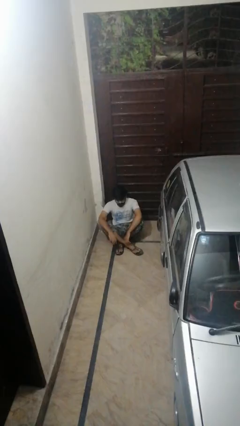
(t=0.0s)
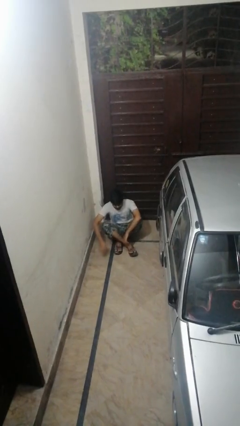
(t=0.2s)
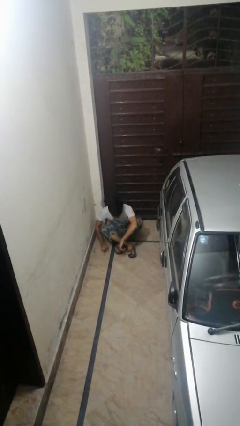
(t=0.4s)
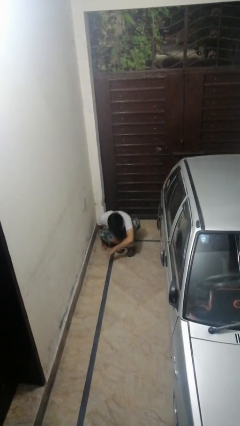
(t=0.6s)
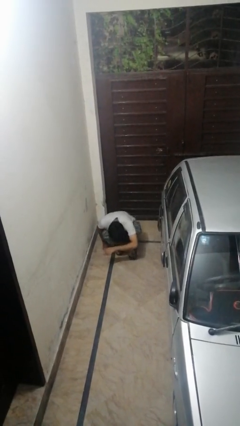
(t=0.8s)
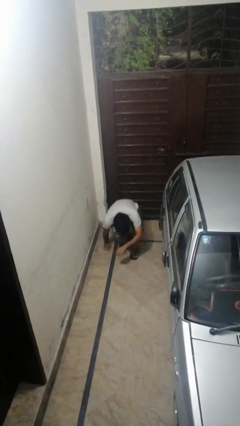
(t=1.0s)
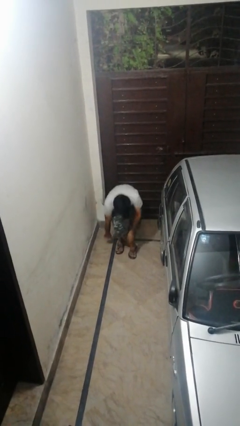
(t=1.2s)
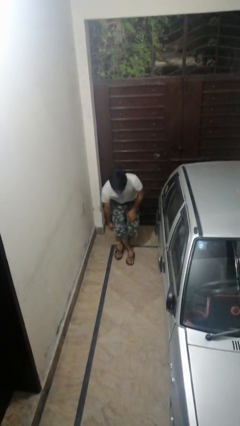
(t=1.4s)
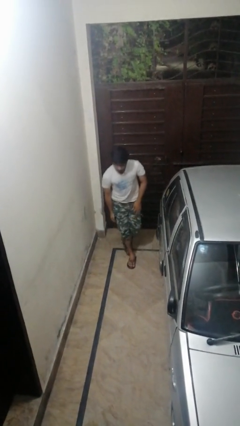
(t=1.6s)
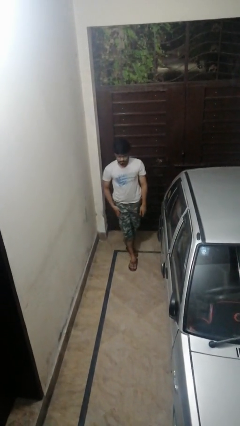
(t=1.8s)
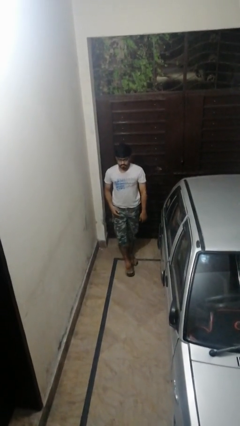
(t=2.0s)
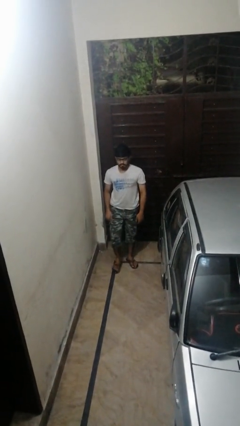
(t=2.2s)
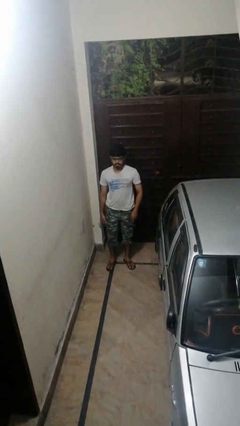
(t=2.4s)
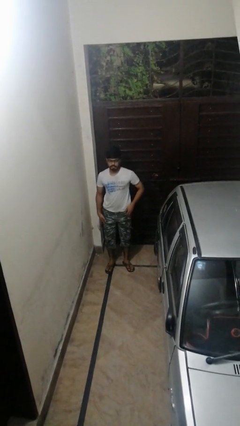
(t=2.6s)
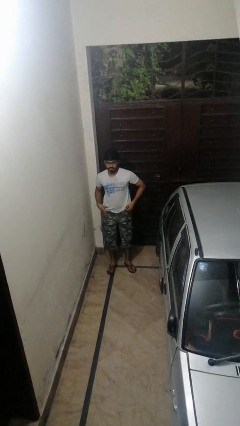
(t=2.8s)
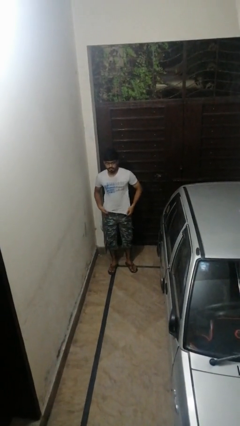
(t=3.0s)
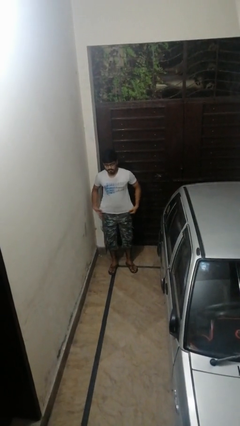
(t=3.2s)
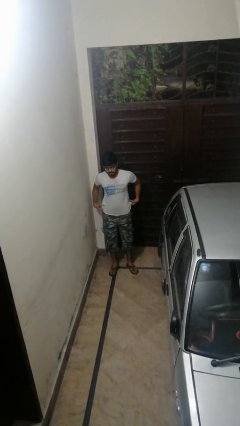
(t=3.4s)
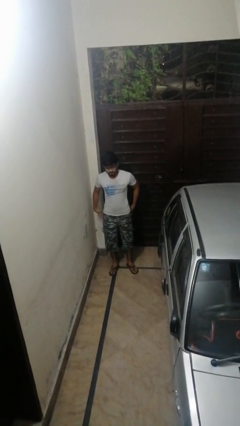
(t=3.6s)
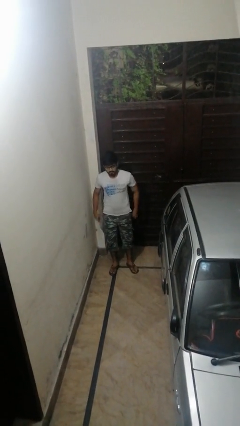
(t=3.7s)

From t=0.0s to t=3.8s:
person stands up from floor

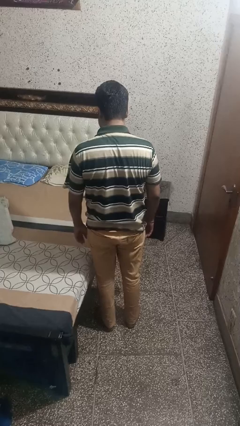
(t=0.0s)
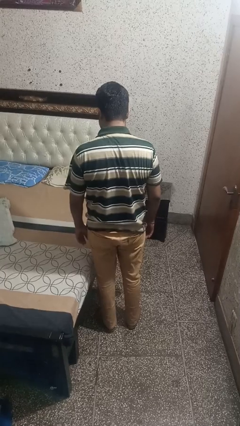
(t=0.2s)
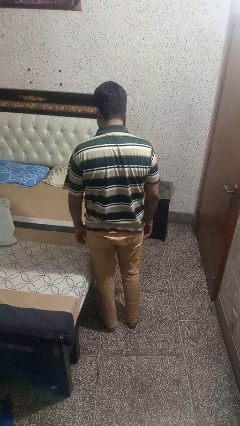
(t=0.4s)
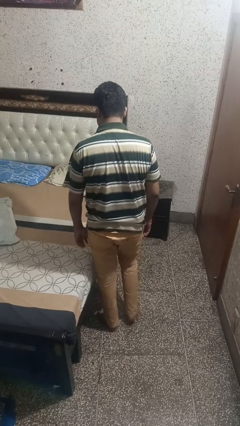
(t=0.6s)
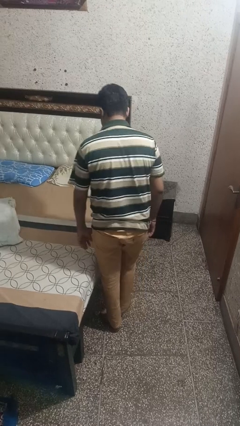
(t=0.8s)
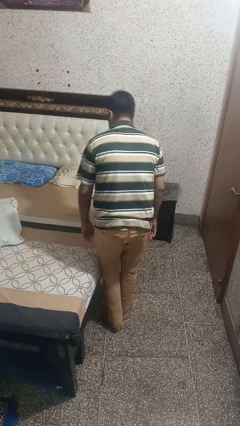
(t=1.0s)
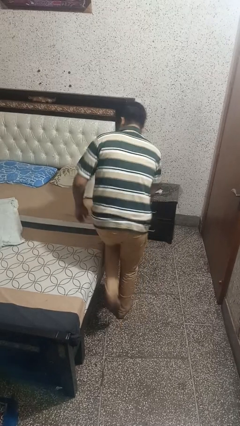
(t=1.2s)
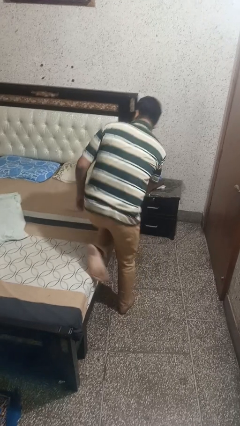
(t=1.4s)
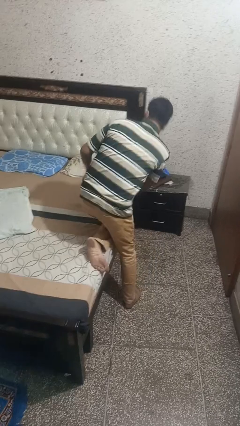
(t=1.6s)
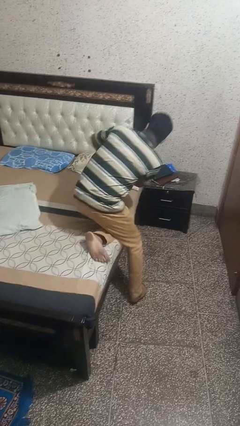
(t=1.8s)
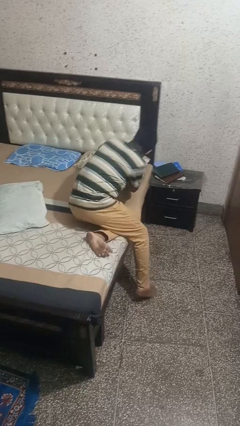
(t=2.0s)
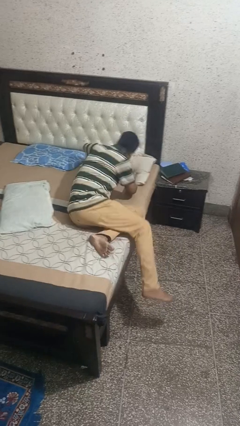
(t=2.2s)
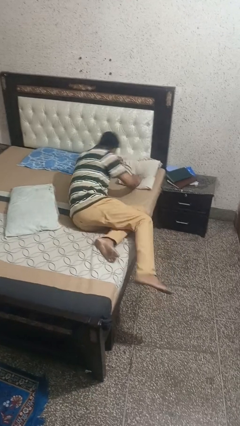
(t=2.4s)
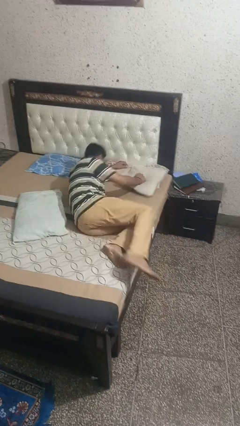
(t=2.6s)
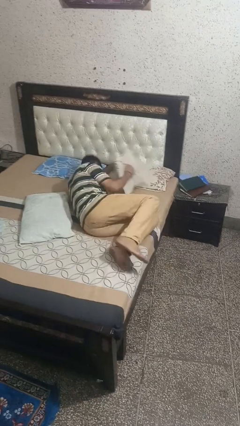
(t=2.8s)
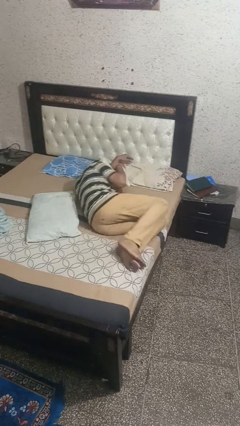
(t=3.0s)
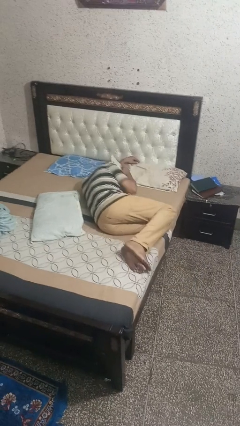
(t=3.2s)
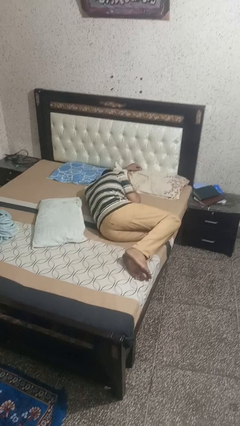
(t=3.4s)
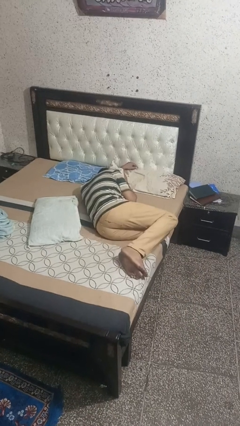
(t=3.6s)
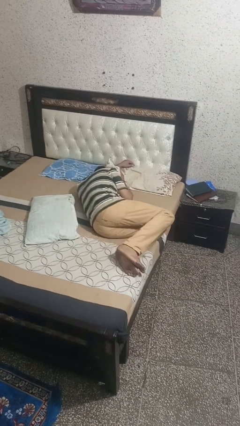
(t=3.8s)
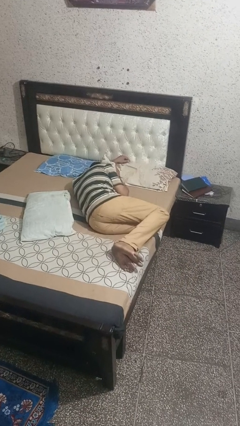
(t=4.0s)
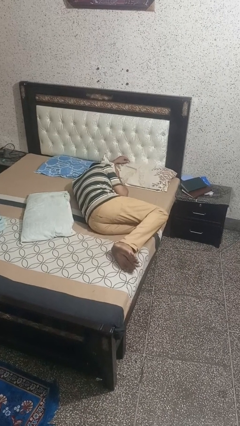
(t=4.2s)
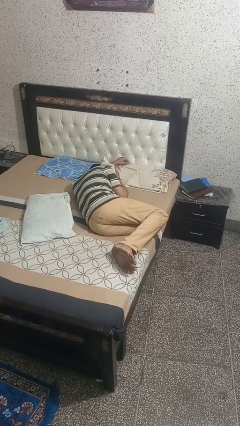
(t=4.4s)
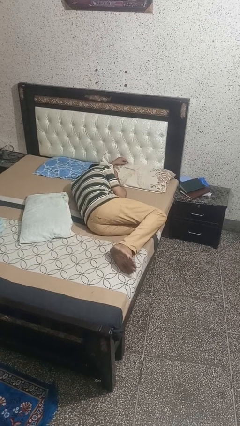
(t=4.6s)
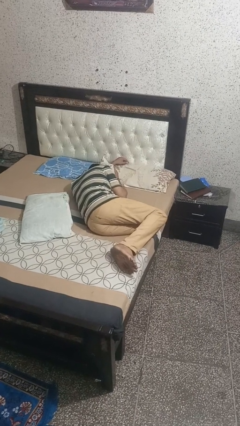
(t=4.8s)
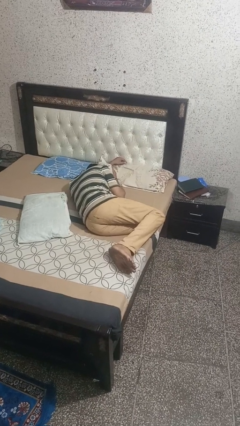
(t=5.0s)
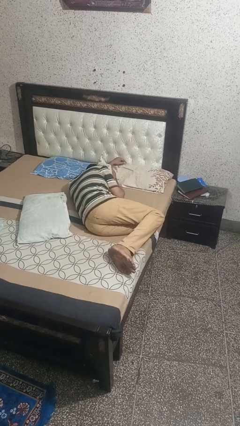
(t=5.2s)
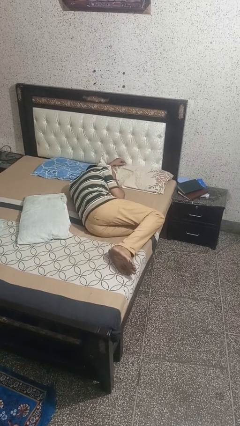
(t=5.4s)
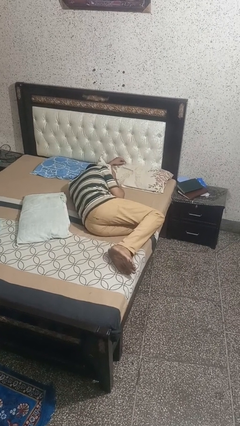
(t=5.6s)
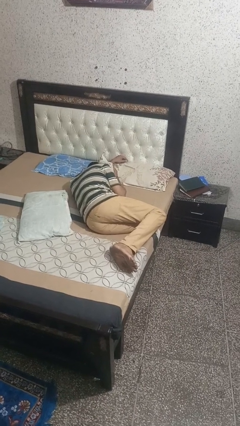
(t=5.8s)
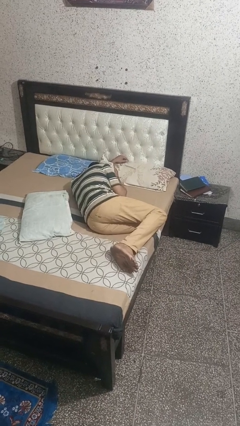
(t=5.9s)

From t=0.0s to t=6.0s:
person lies down on bed

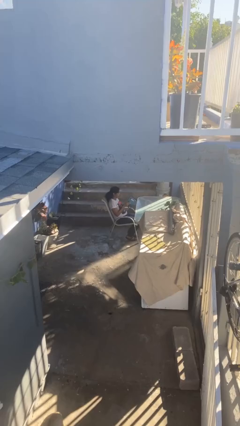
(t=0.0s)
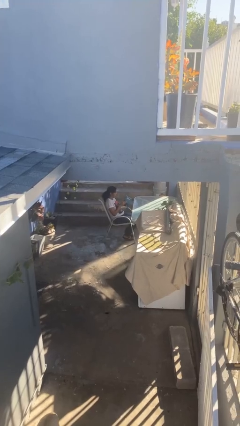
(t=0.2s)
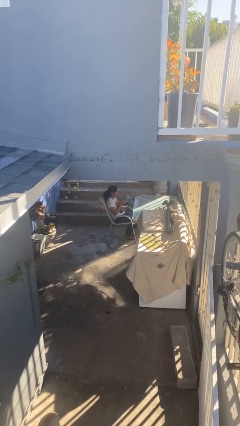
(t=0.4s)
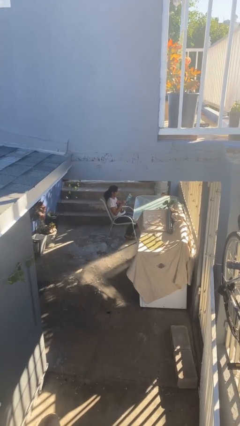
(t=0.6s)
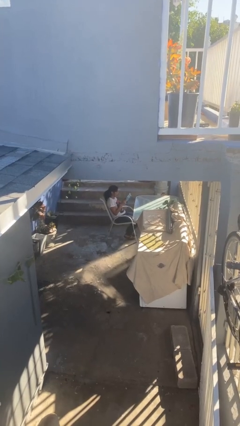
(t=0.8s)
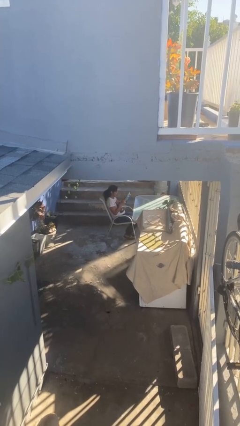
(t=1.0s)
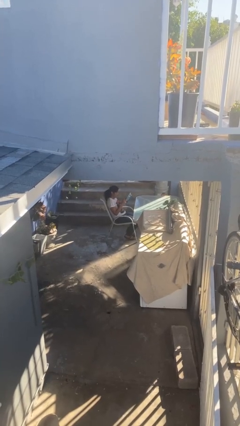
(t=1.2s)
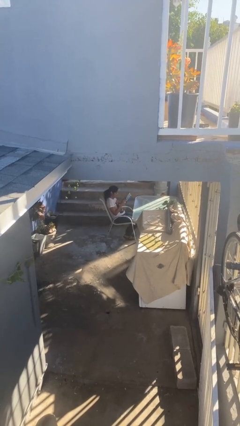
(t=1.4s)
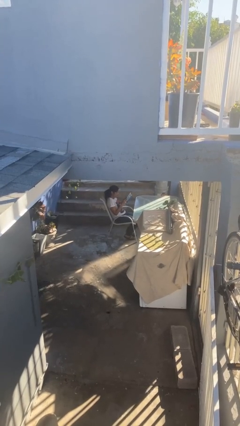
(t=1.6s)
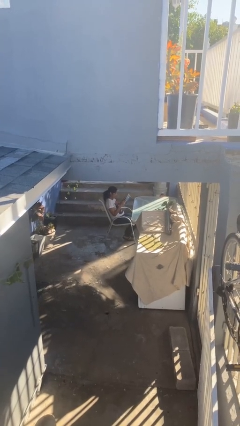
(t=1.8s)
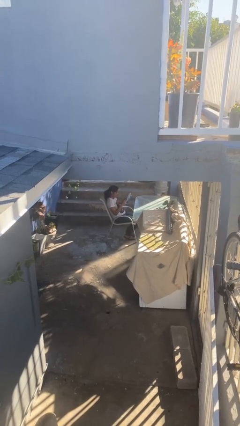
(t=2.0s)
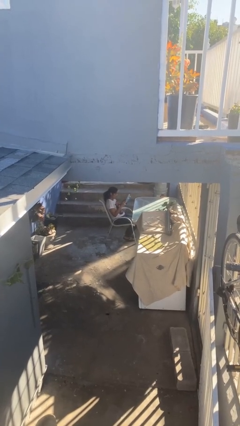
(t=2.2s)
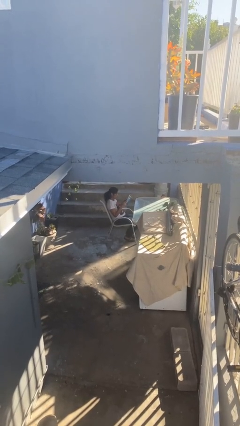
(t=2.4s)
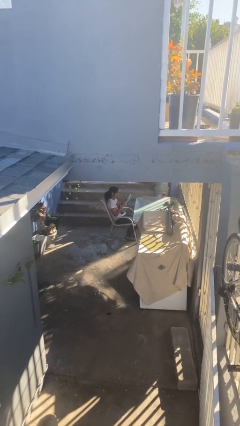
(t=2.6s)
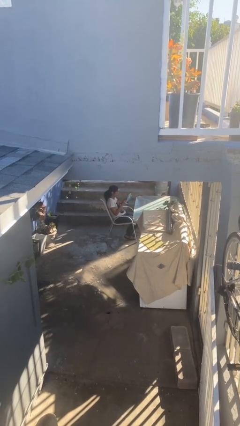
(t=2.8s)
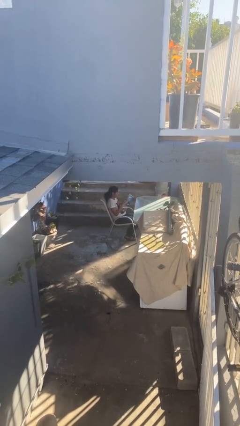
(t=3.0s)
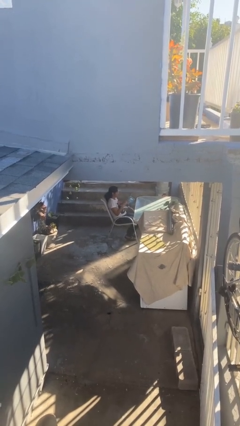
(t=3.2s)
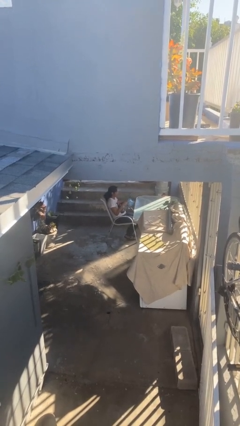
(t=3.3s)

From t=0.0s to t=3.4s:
person reads document

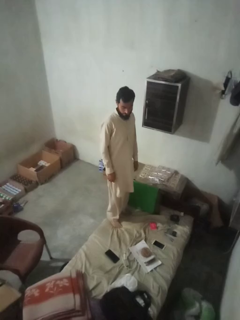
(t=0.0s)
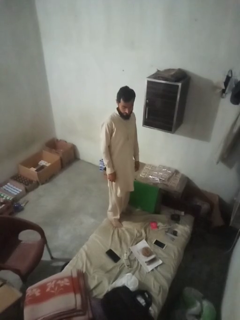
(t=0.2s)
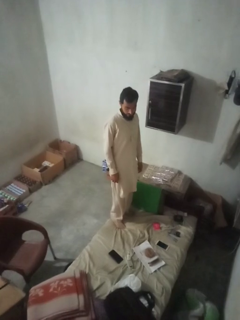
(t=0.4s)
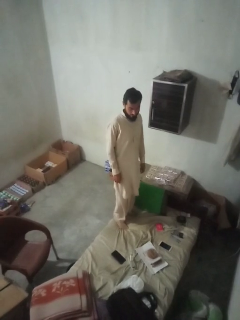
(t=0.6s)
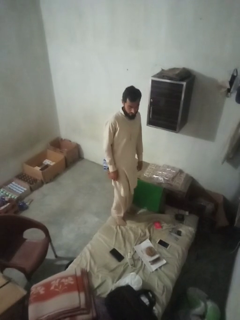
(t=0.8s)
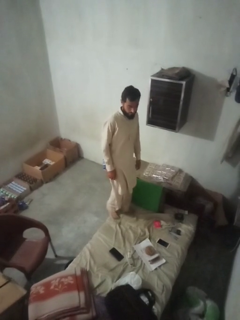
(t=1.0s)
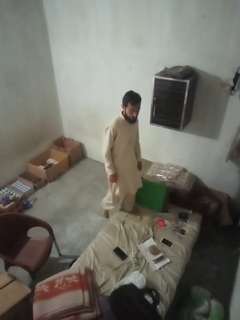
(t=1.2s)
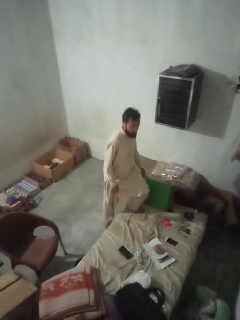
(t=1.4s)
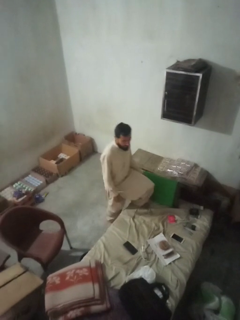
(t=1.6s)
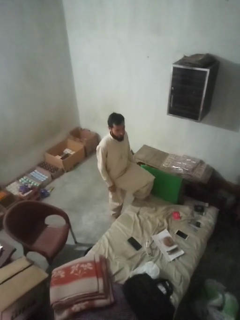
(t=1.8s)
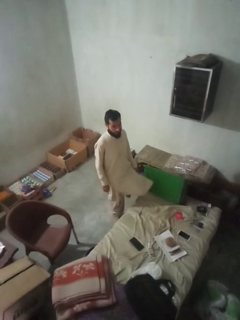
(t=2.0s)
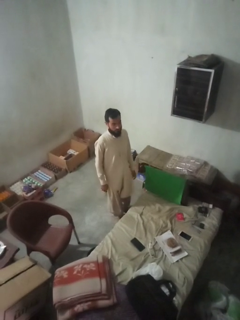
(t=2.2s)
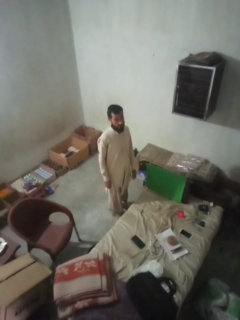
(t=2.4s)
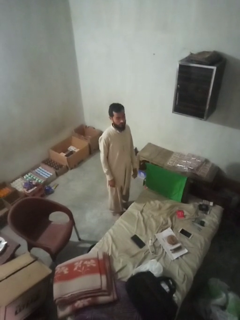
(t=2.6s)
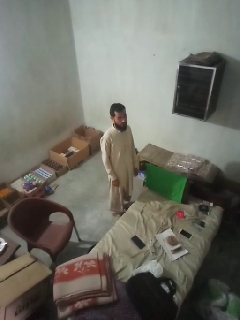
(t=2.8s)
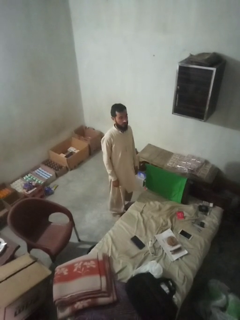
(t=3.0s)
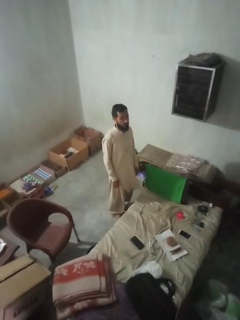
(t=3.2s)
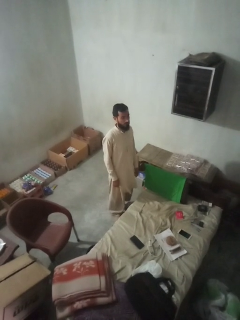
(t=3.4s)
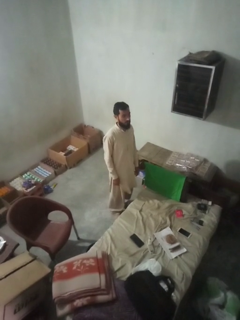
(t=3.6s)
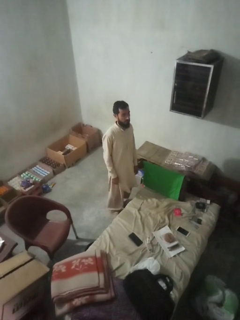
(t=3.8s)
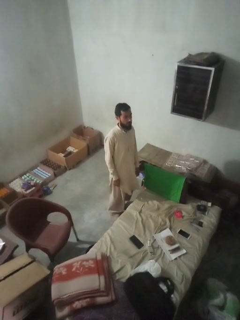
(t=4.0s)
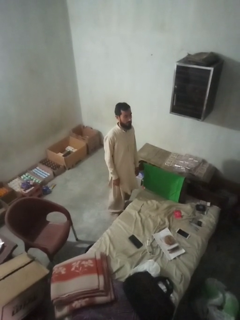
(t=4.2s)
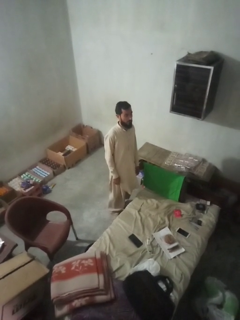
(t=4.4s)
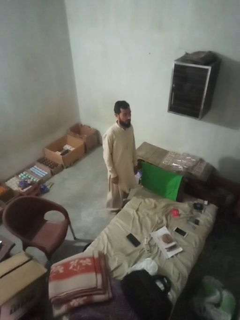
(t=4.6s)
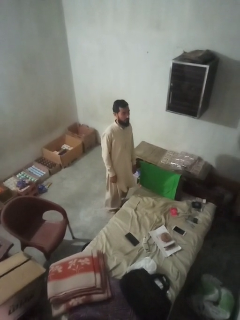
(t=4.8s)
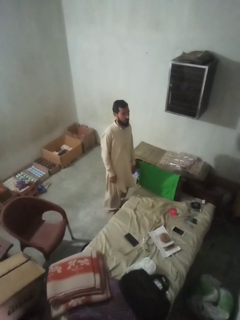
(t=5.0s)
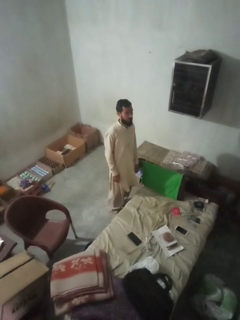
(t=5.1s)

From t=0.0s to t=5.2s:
person climbs off couch

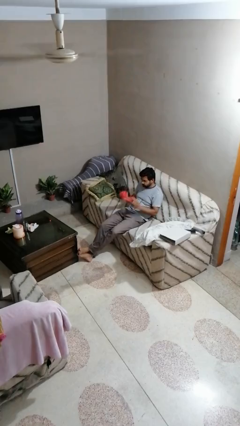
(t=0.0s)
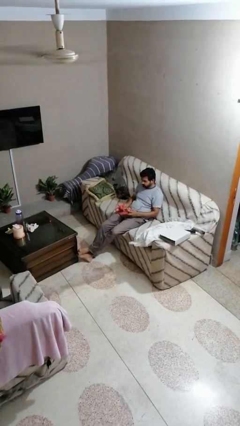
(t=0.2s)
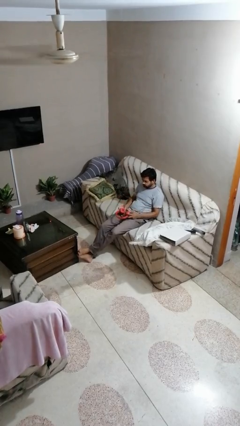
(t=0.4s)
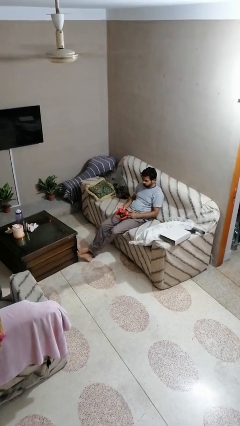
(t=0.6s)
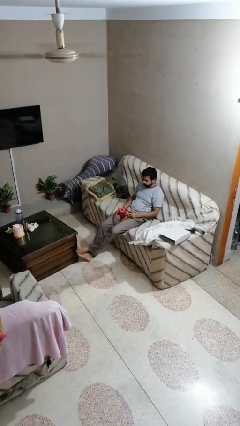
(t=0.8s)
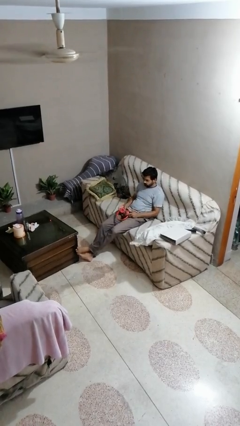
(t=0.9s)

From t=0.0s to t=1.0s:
person takes off headphones
